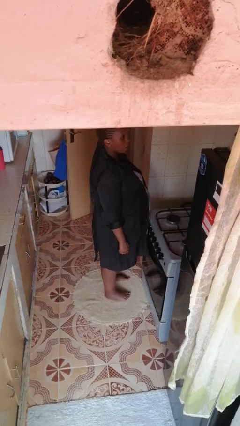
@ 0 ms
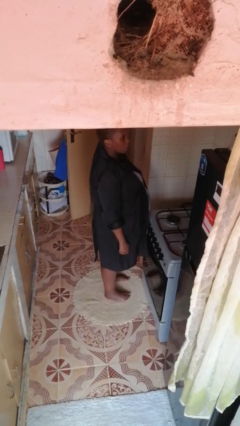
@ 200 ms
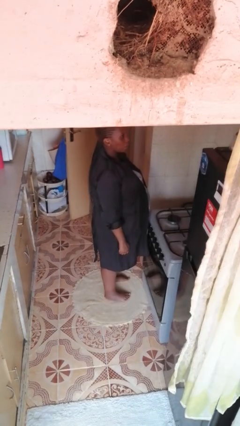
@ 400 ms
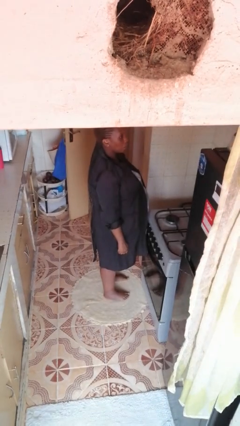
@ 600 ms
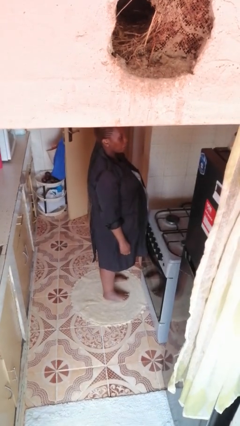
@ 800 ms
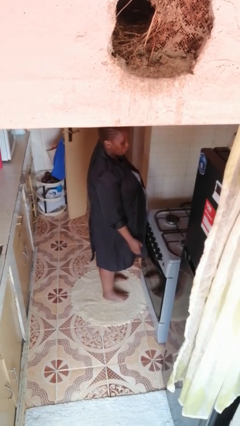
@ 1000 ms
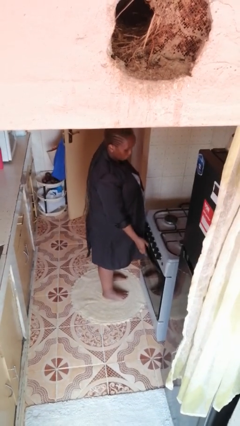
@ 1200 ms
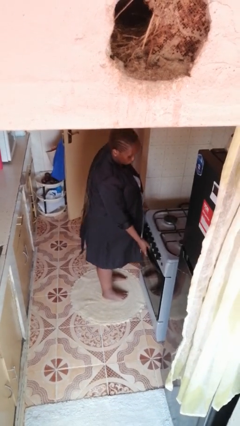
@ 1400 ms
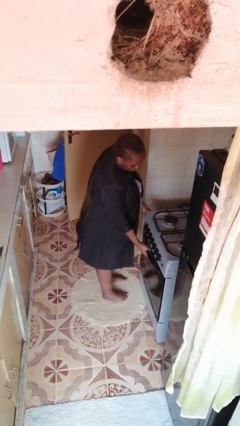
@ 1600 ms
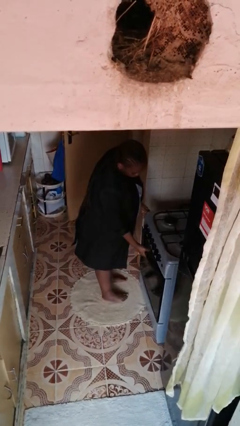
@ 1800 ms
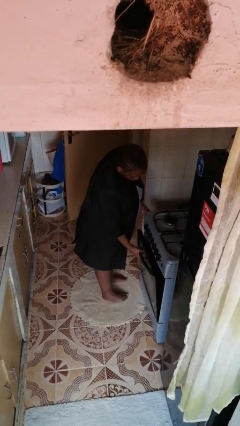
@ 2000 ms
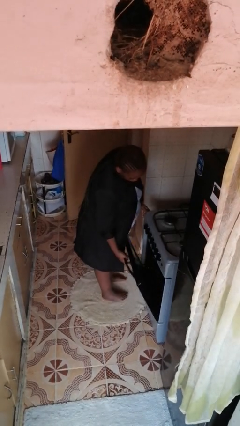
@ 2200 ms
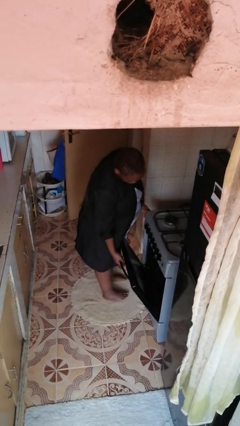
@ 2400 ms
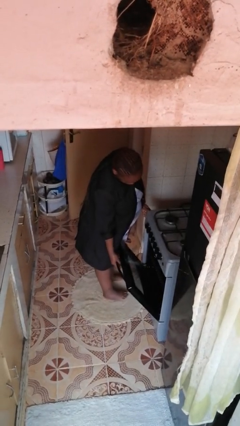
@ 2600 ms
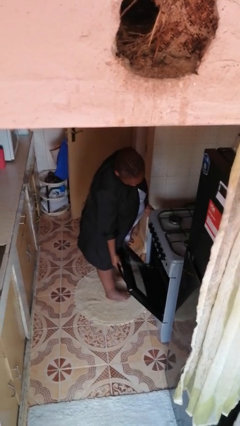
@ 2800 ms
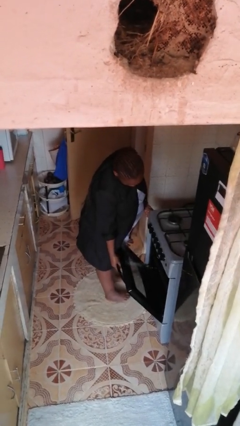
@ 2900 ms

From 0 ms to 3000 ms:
person opens oven door

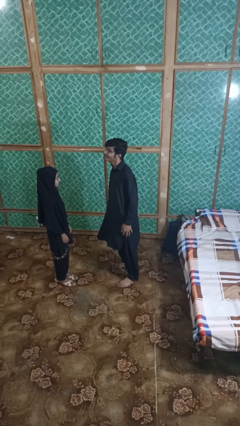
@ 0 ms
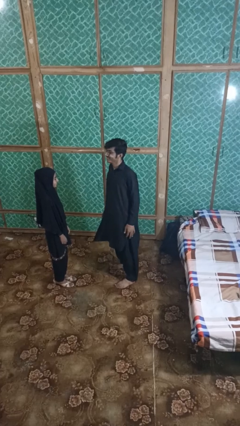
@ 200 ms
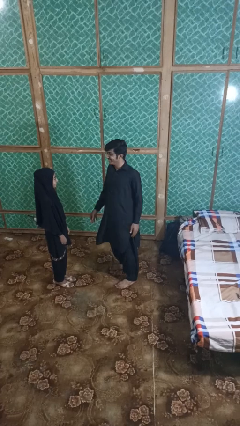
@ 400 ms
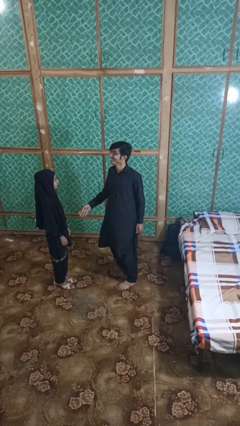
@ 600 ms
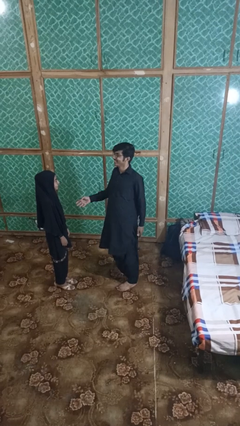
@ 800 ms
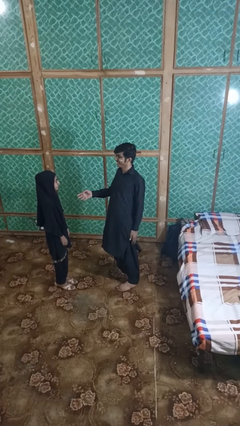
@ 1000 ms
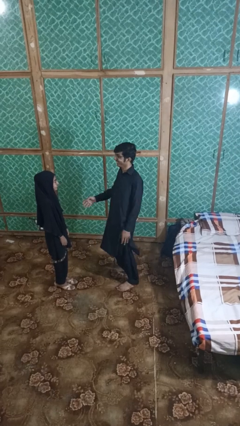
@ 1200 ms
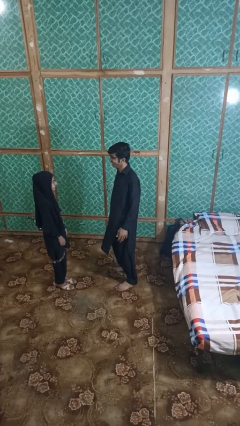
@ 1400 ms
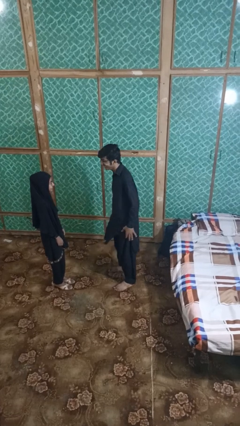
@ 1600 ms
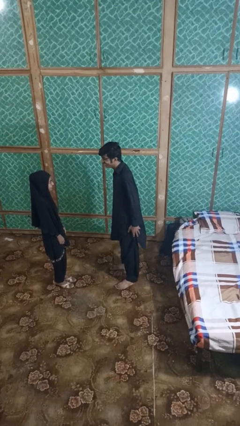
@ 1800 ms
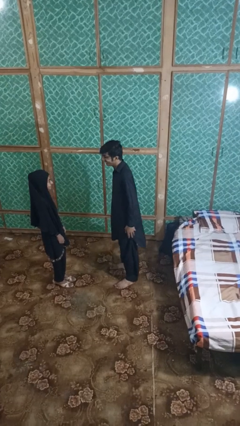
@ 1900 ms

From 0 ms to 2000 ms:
person laughs with person

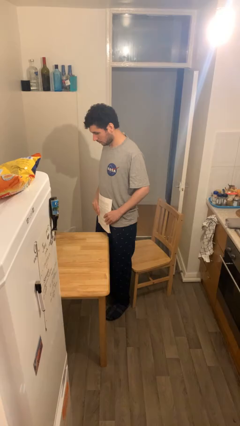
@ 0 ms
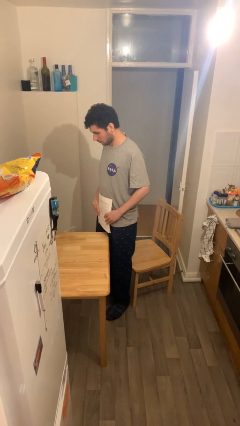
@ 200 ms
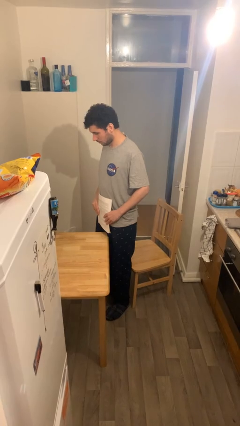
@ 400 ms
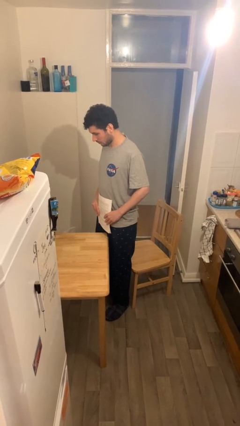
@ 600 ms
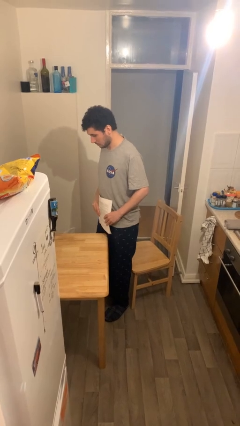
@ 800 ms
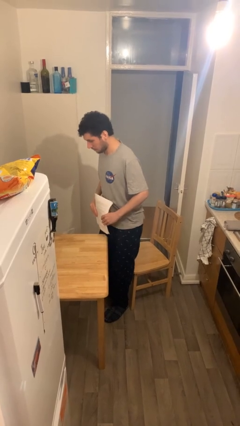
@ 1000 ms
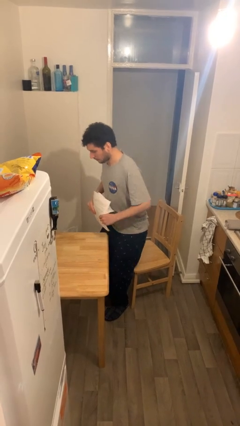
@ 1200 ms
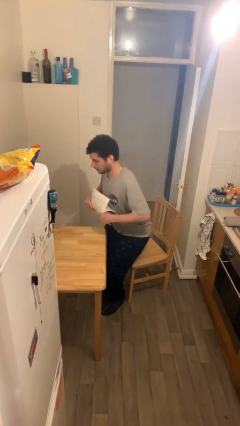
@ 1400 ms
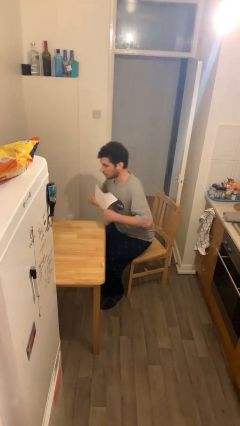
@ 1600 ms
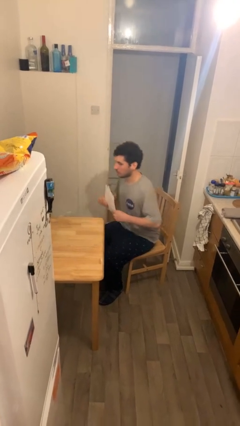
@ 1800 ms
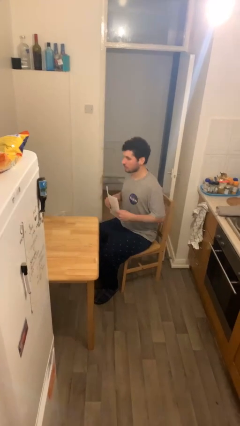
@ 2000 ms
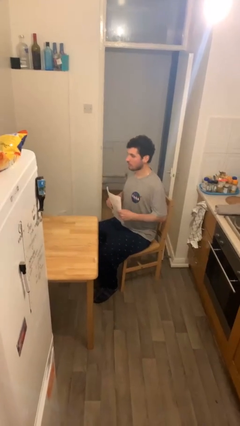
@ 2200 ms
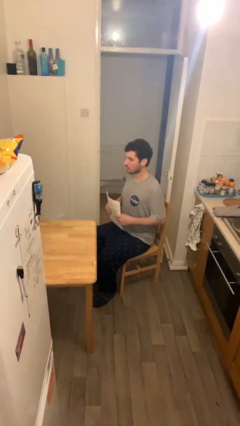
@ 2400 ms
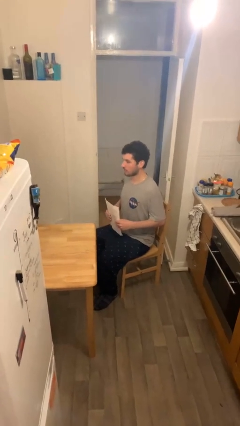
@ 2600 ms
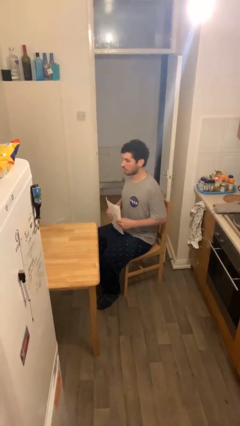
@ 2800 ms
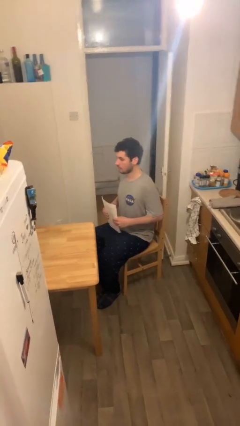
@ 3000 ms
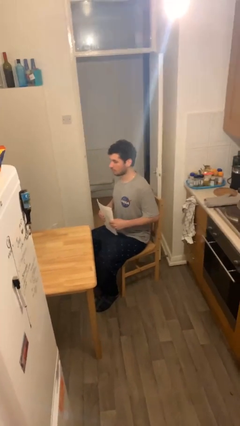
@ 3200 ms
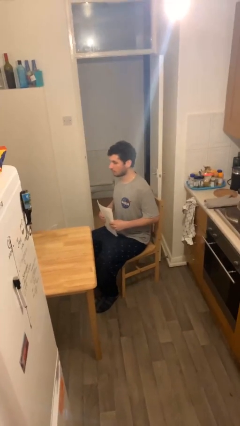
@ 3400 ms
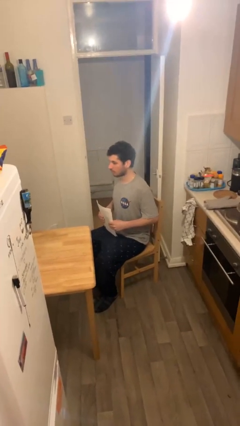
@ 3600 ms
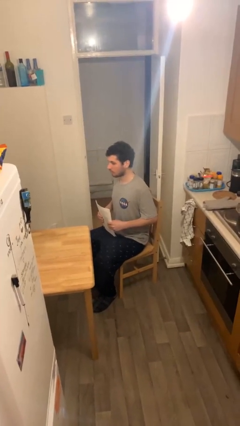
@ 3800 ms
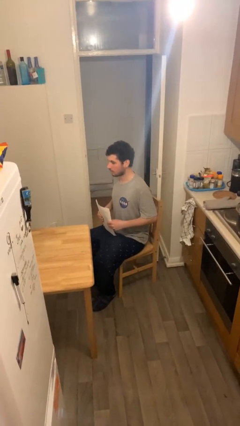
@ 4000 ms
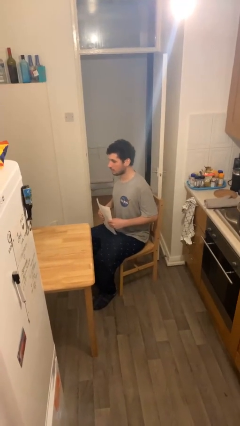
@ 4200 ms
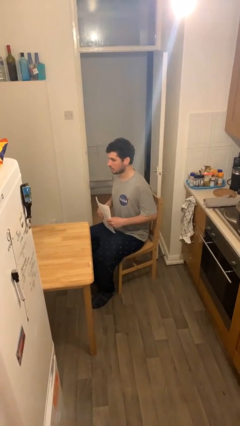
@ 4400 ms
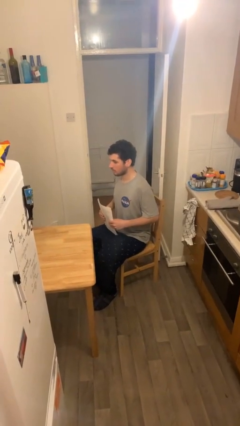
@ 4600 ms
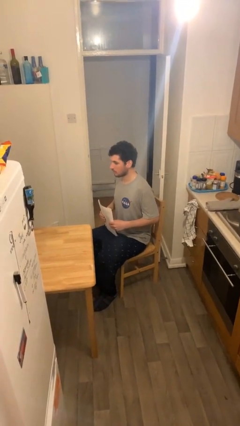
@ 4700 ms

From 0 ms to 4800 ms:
person sits down

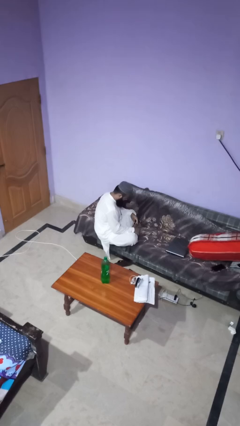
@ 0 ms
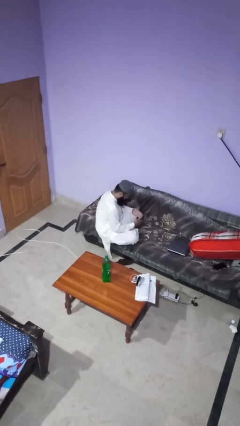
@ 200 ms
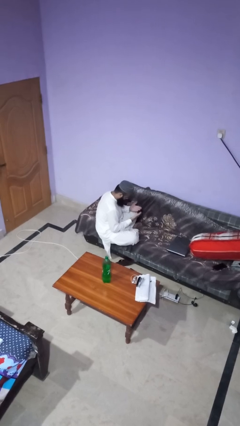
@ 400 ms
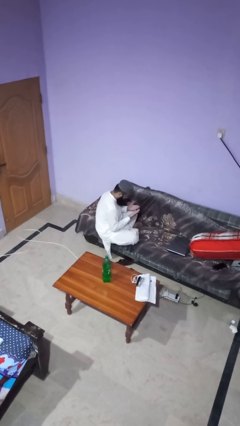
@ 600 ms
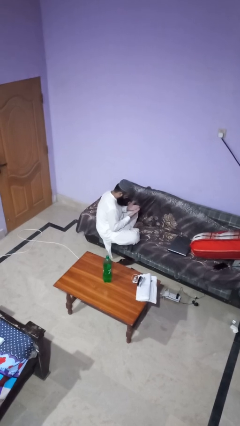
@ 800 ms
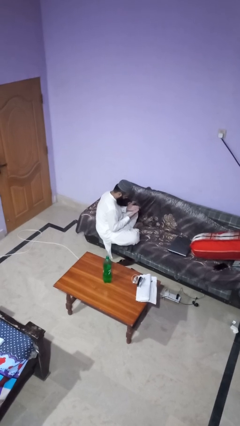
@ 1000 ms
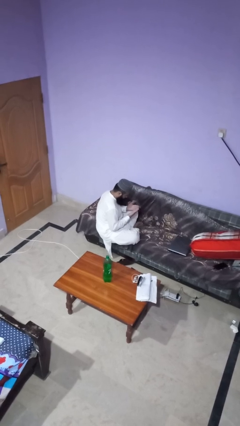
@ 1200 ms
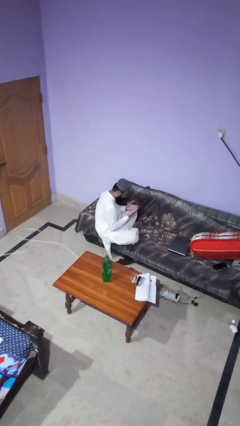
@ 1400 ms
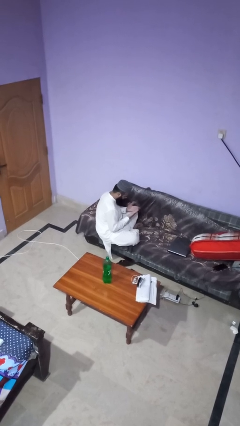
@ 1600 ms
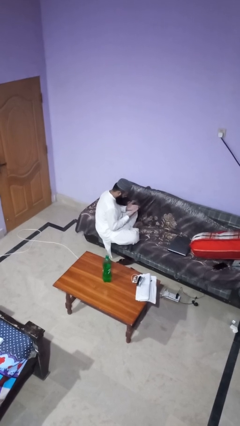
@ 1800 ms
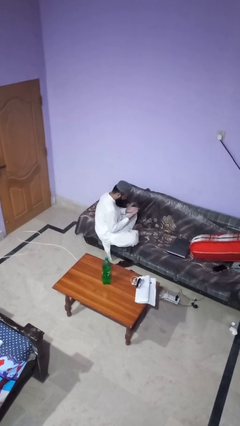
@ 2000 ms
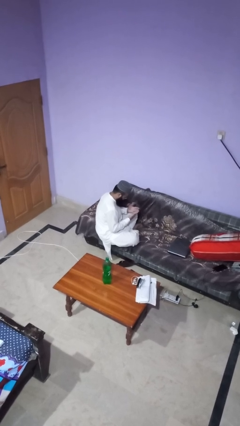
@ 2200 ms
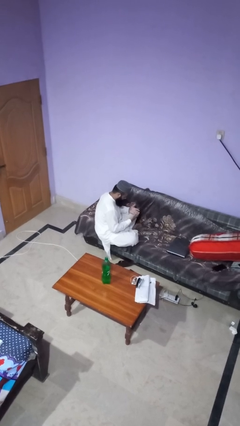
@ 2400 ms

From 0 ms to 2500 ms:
person looks at hands in lap

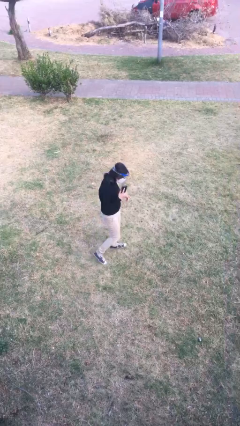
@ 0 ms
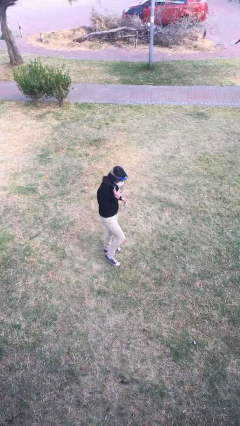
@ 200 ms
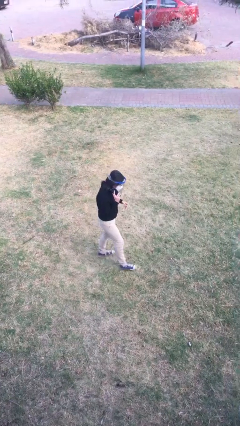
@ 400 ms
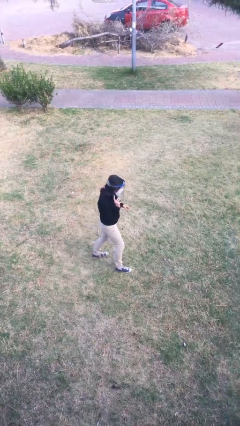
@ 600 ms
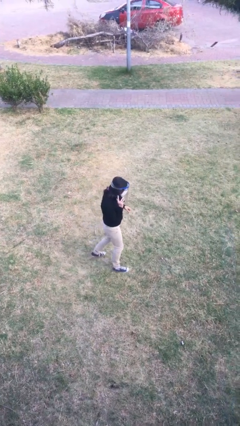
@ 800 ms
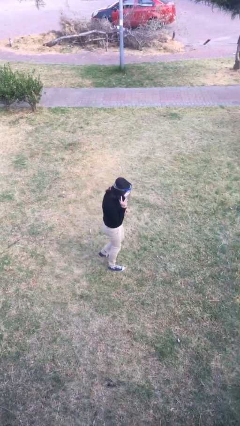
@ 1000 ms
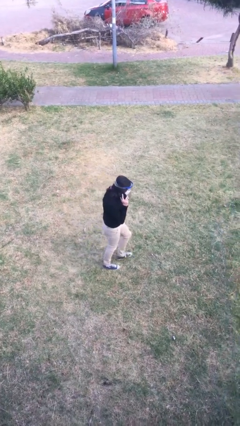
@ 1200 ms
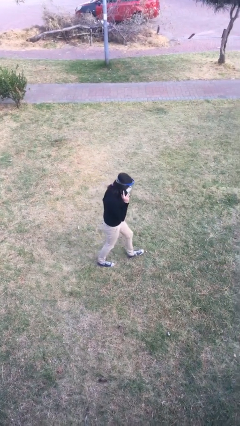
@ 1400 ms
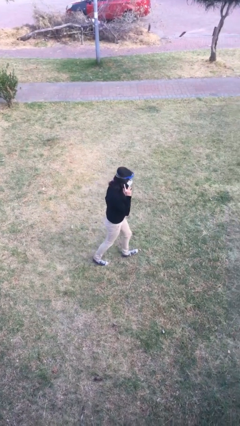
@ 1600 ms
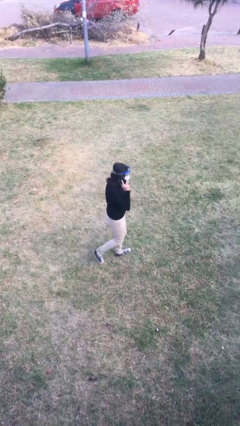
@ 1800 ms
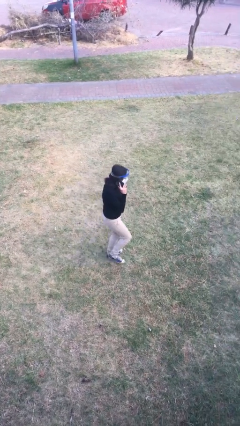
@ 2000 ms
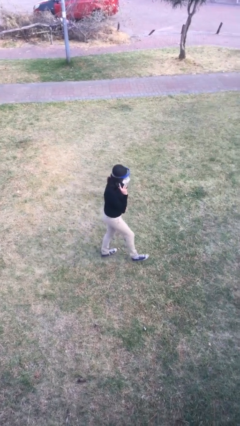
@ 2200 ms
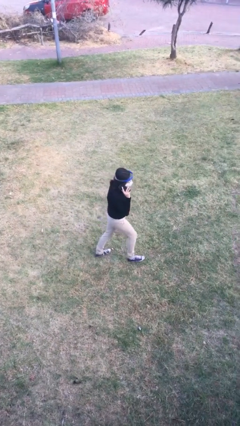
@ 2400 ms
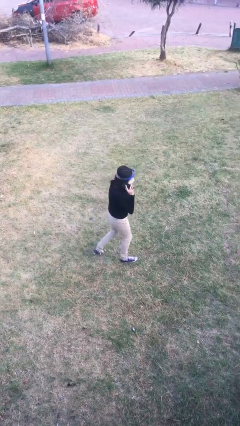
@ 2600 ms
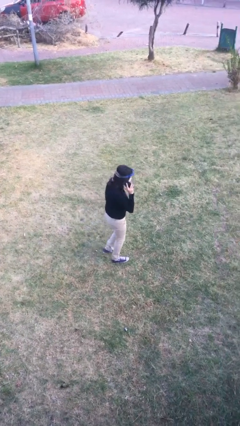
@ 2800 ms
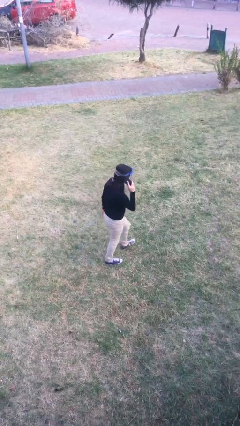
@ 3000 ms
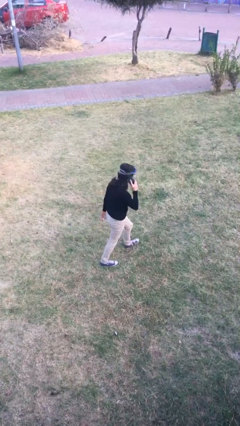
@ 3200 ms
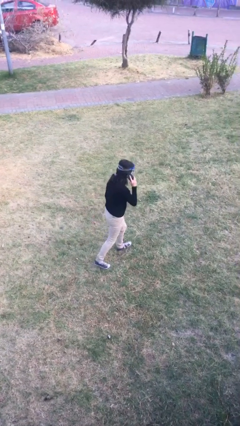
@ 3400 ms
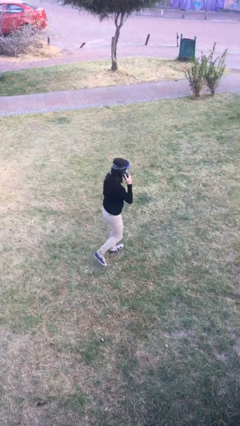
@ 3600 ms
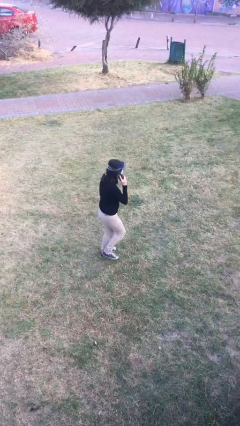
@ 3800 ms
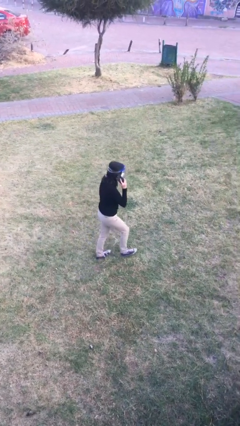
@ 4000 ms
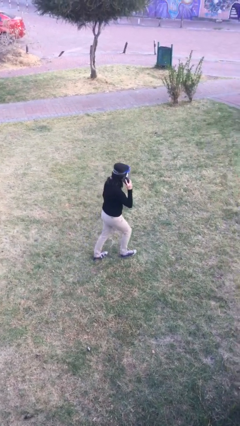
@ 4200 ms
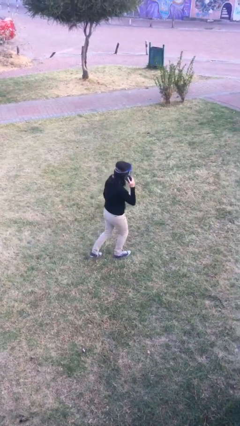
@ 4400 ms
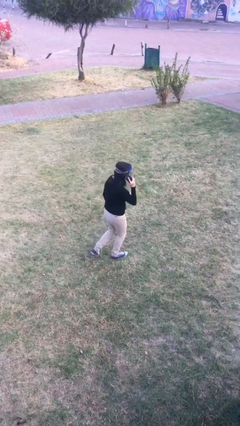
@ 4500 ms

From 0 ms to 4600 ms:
person talks on phone

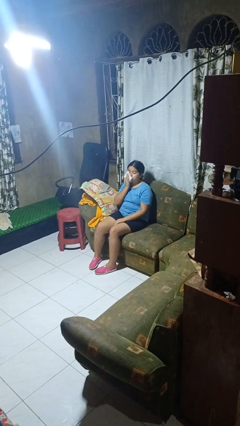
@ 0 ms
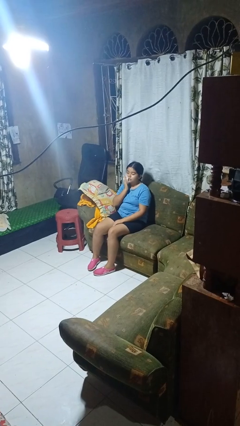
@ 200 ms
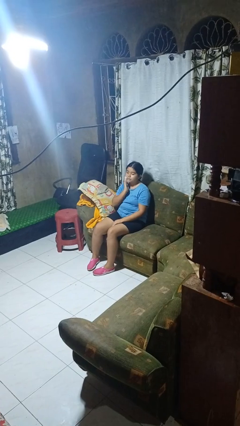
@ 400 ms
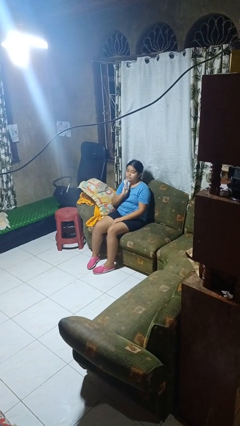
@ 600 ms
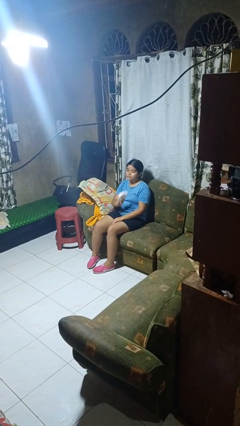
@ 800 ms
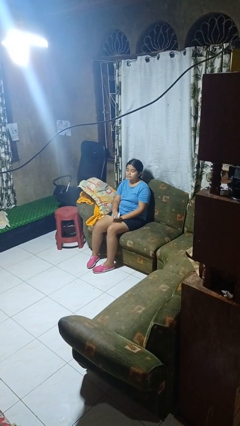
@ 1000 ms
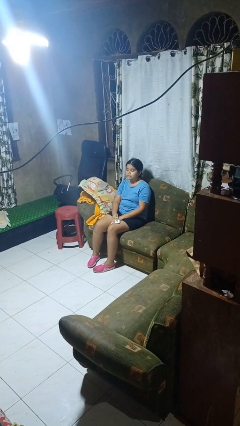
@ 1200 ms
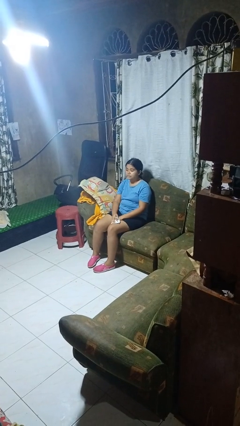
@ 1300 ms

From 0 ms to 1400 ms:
person wipes mouth with napkin
